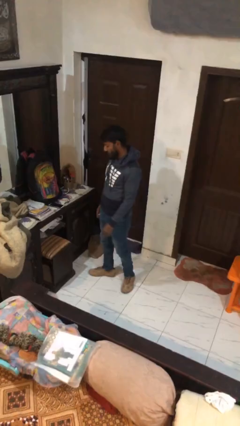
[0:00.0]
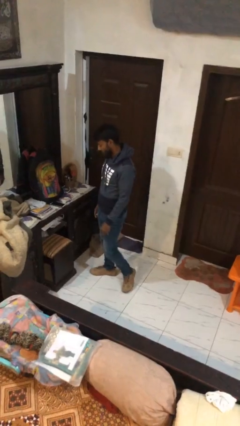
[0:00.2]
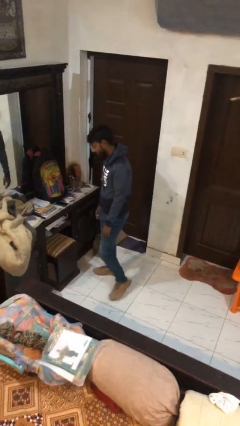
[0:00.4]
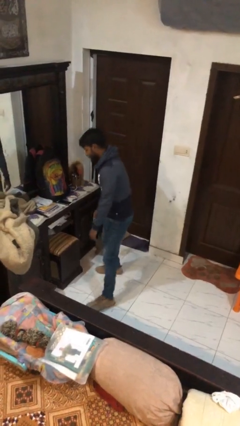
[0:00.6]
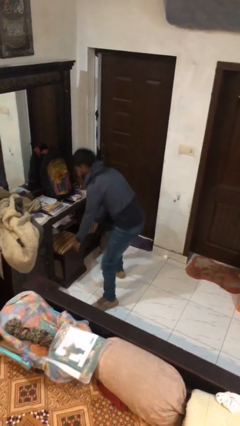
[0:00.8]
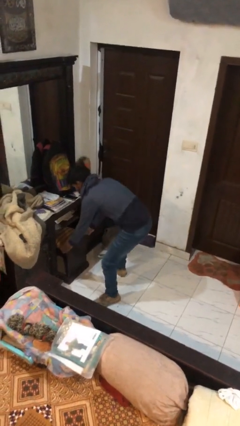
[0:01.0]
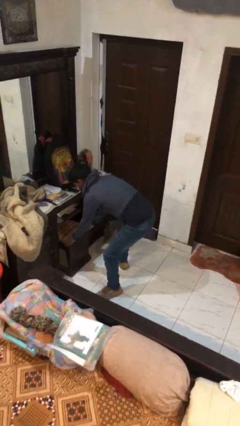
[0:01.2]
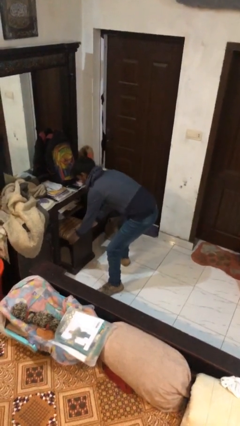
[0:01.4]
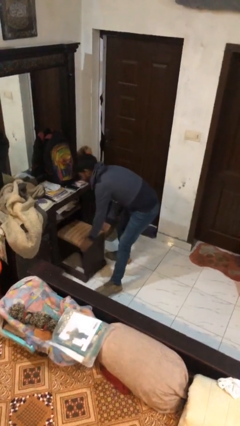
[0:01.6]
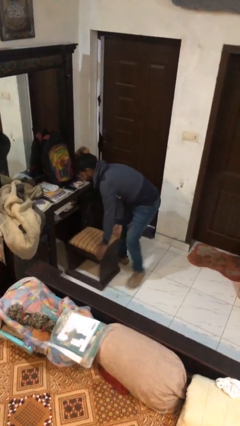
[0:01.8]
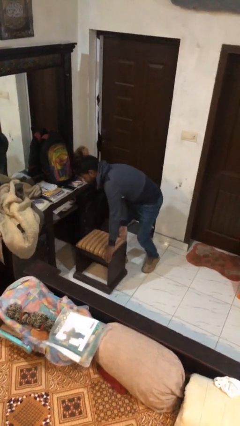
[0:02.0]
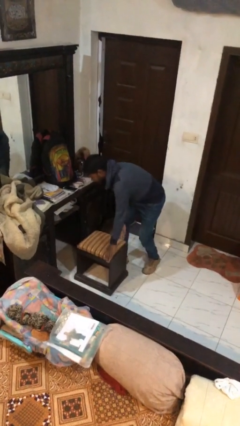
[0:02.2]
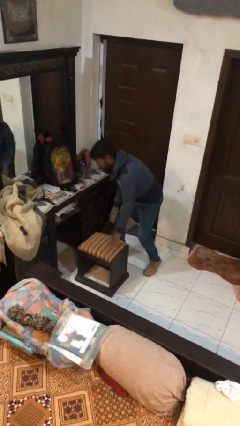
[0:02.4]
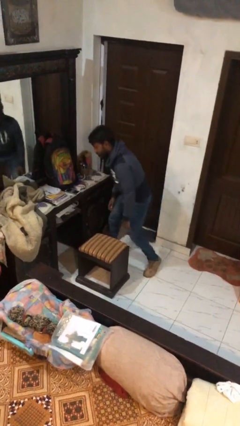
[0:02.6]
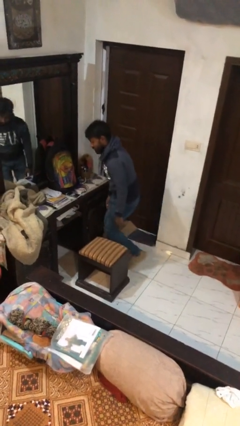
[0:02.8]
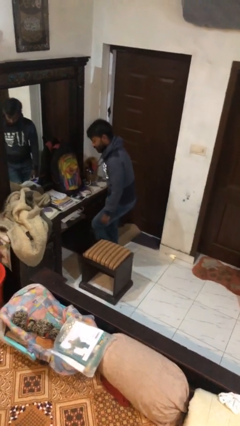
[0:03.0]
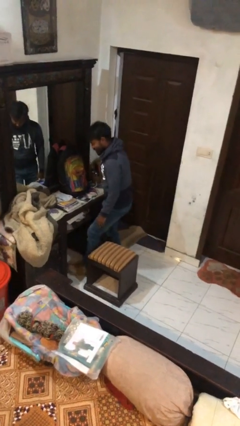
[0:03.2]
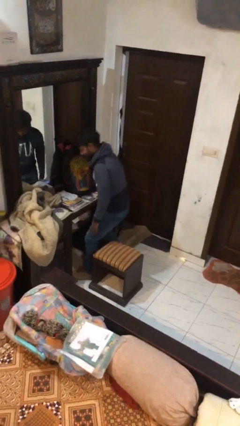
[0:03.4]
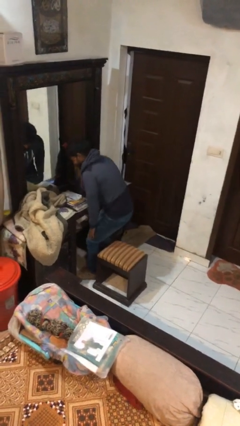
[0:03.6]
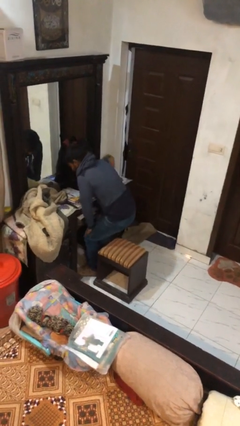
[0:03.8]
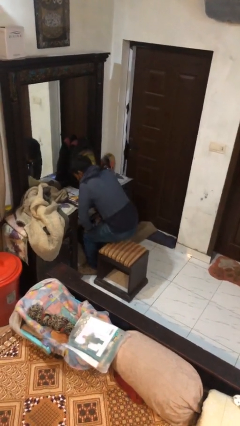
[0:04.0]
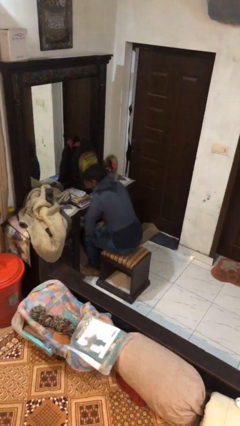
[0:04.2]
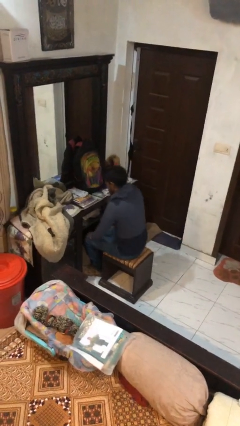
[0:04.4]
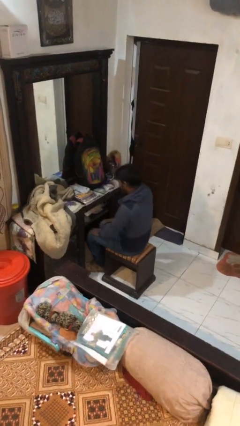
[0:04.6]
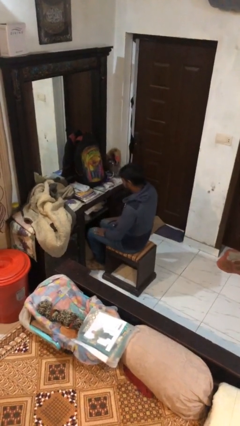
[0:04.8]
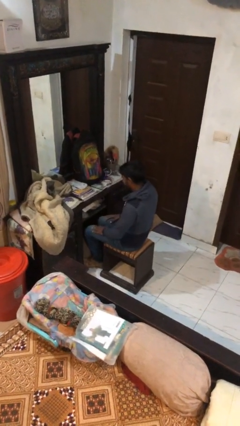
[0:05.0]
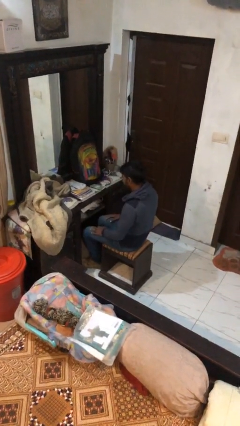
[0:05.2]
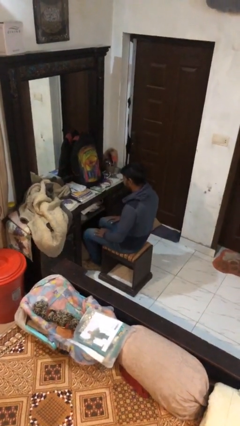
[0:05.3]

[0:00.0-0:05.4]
person sits down

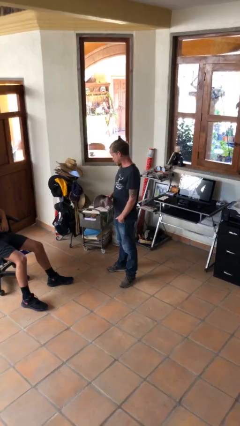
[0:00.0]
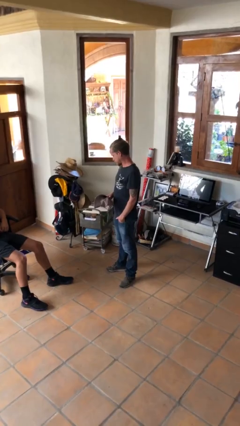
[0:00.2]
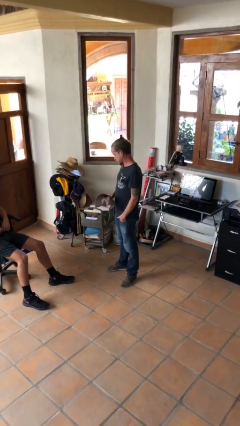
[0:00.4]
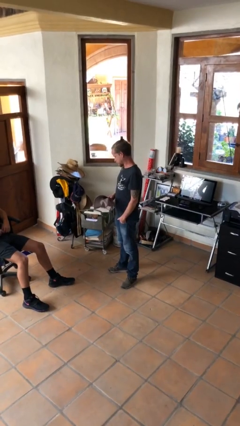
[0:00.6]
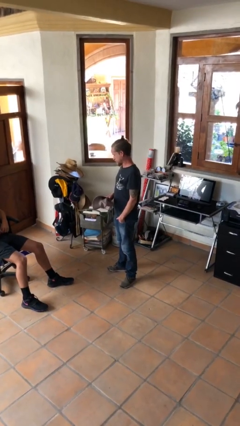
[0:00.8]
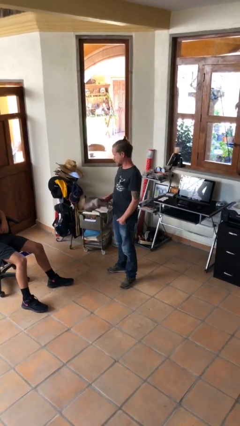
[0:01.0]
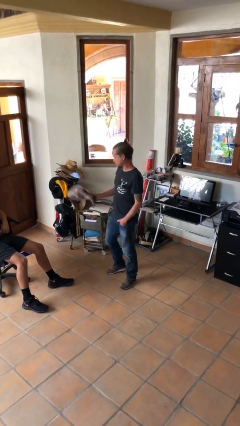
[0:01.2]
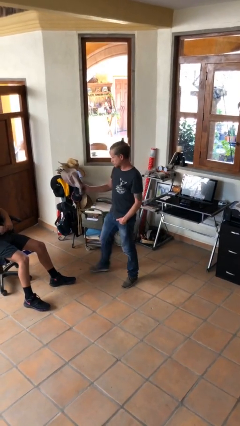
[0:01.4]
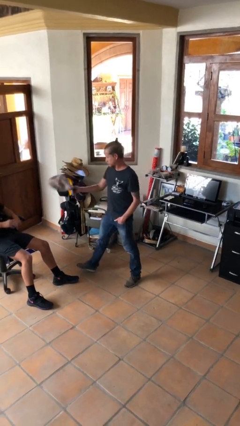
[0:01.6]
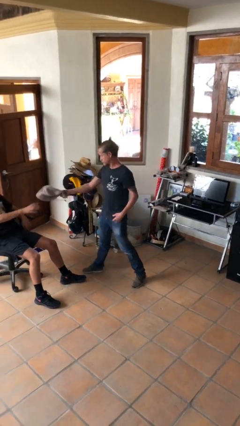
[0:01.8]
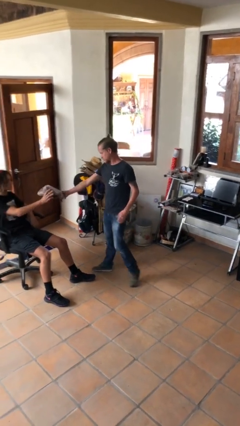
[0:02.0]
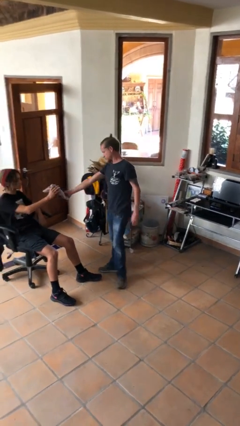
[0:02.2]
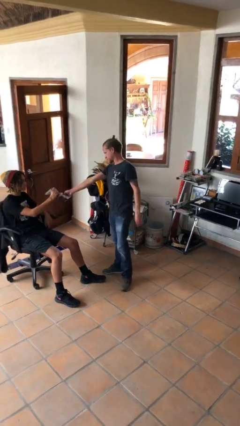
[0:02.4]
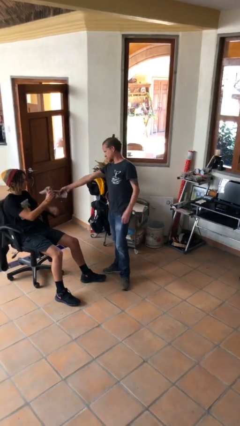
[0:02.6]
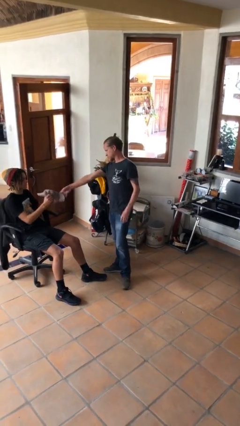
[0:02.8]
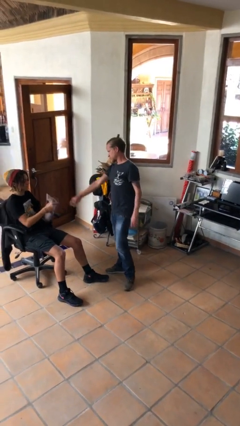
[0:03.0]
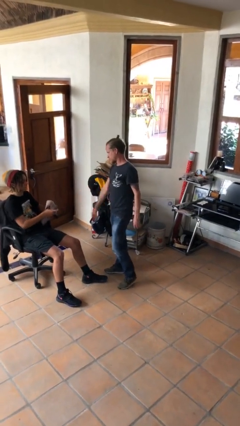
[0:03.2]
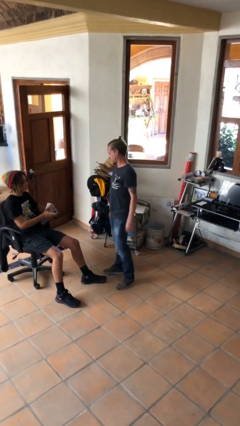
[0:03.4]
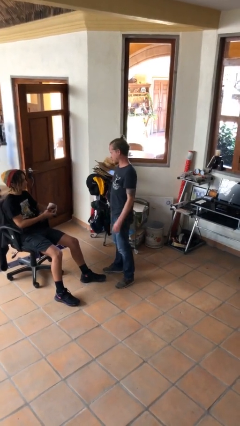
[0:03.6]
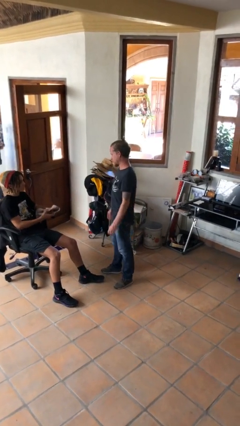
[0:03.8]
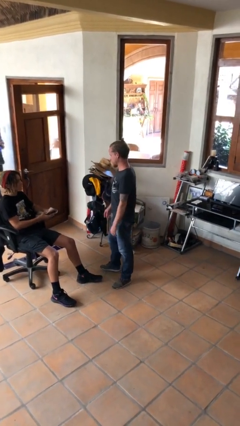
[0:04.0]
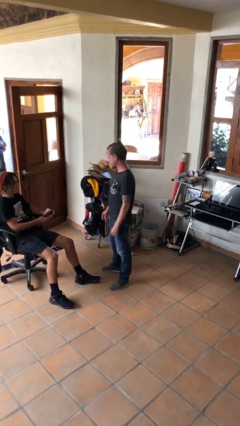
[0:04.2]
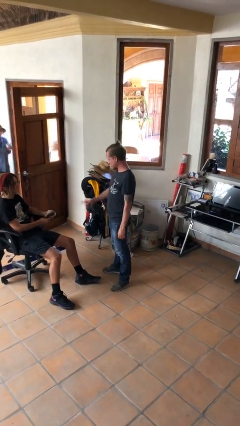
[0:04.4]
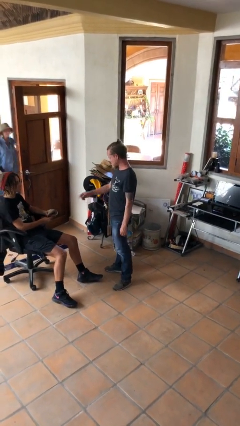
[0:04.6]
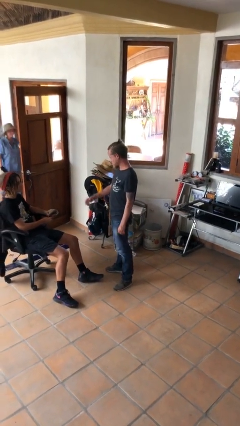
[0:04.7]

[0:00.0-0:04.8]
person transfers object to person

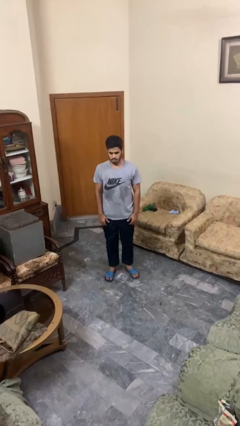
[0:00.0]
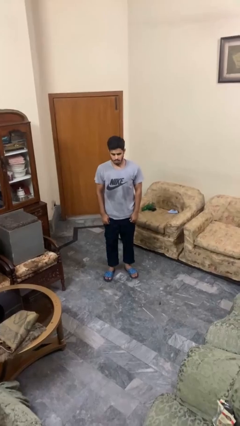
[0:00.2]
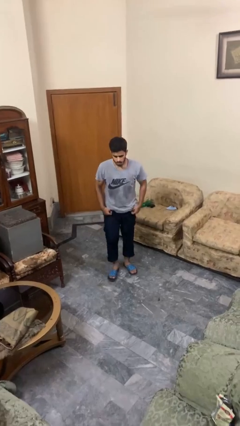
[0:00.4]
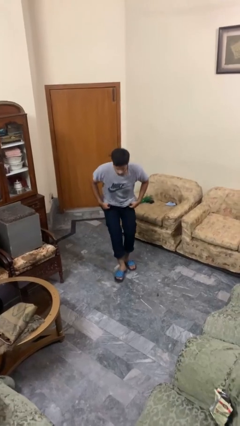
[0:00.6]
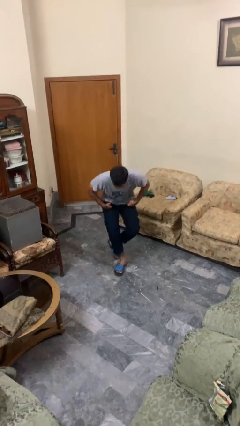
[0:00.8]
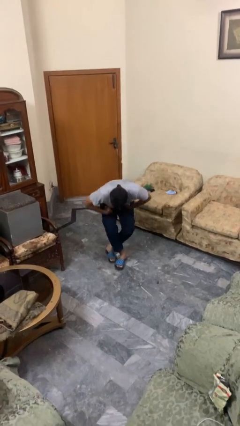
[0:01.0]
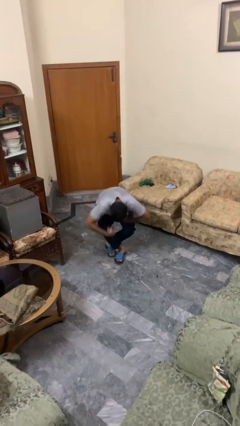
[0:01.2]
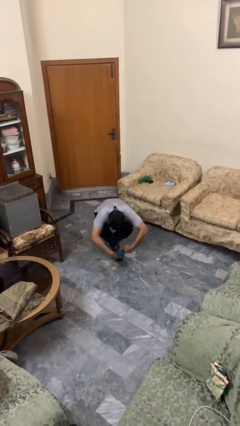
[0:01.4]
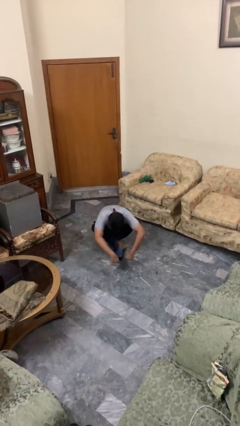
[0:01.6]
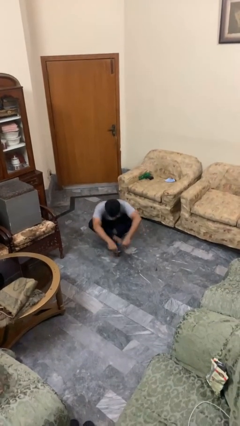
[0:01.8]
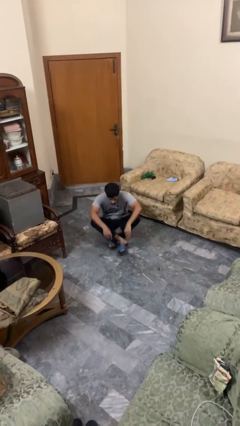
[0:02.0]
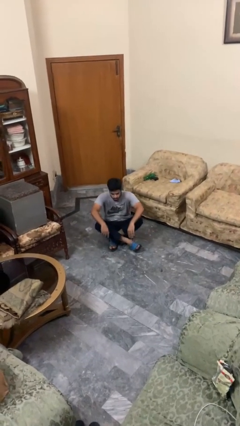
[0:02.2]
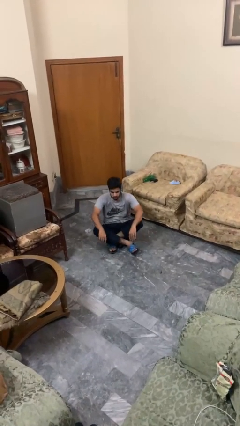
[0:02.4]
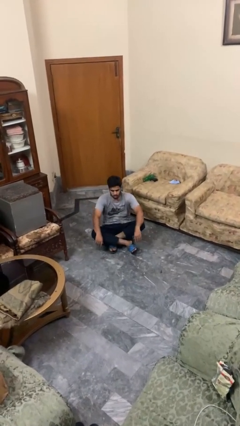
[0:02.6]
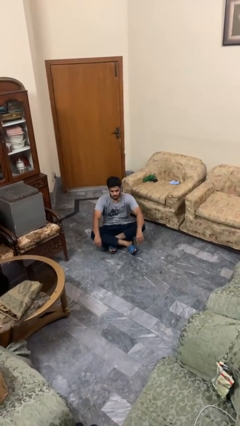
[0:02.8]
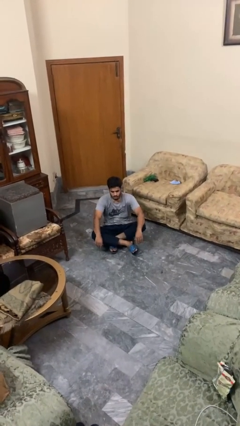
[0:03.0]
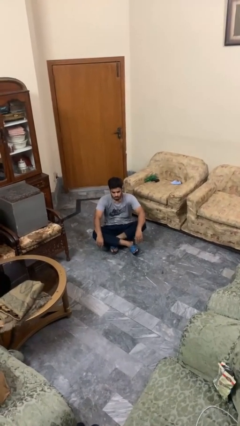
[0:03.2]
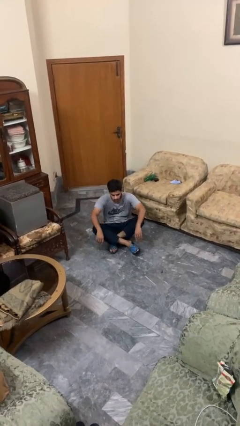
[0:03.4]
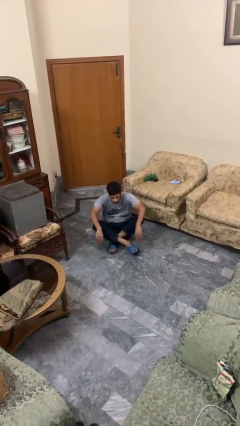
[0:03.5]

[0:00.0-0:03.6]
person sits crisscross

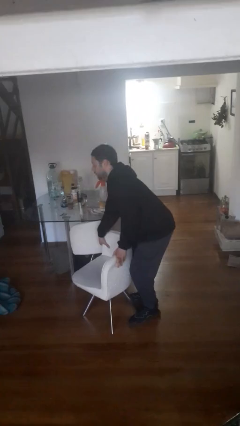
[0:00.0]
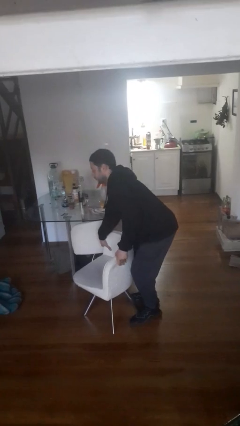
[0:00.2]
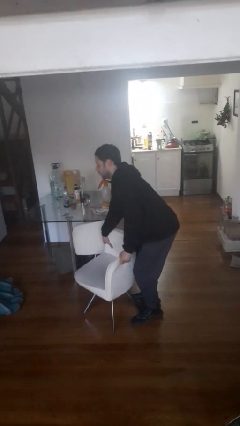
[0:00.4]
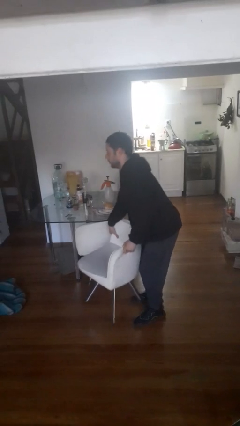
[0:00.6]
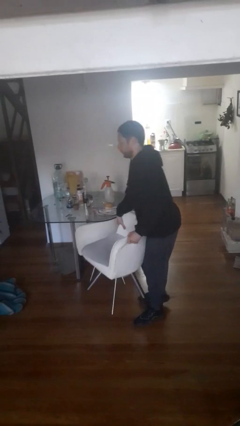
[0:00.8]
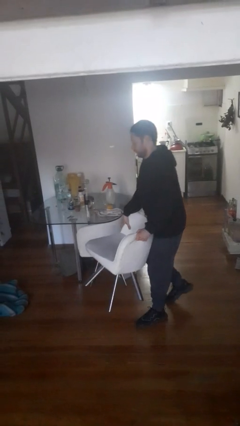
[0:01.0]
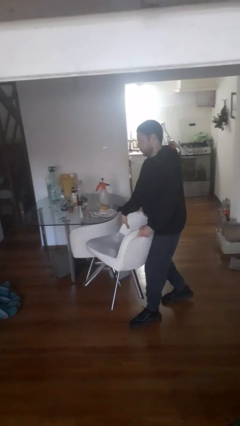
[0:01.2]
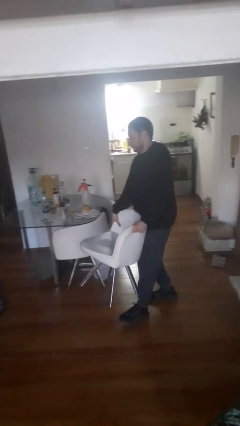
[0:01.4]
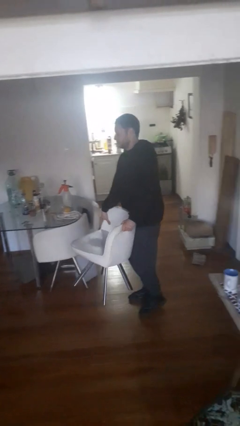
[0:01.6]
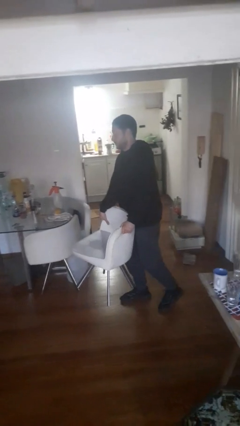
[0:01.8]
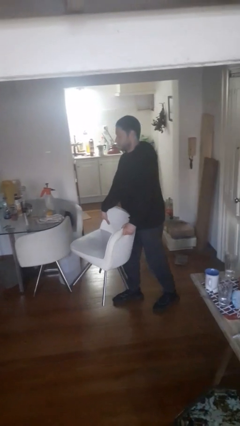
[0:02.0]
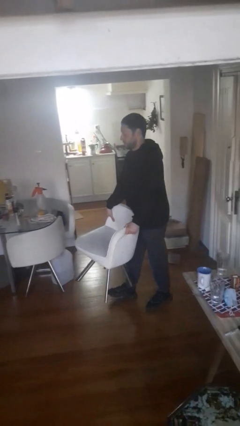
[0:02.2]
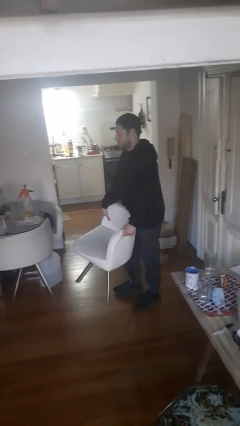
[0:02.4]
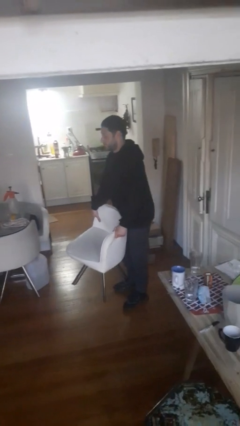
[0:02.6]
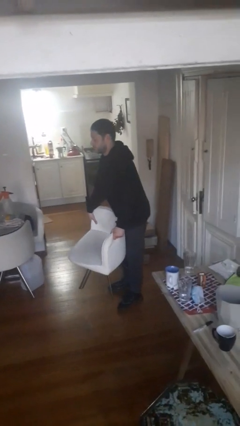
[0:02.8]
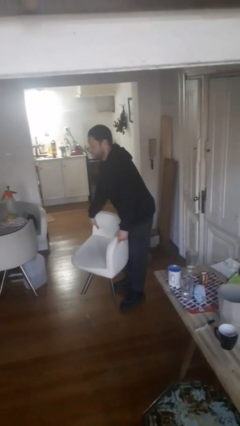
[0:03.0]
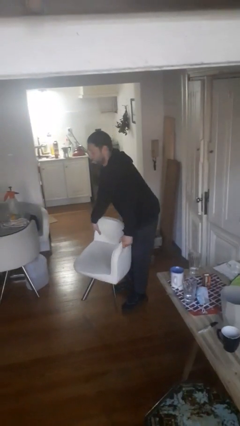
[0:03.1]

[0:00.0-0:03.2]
person carries furniture

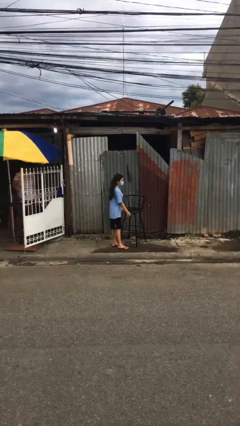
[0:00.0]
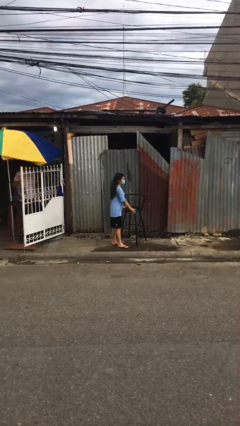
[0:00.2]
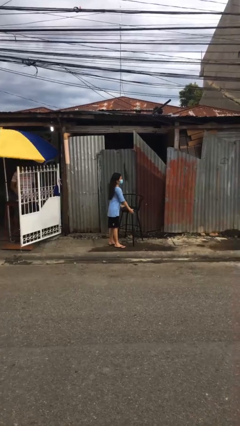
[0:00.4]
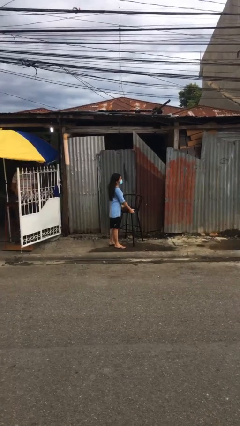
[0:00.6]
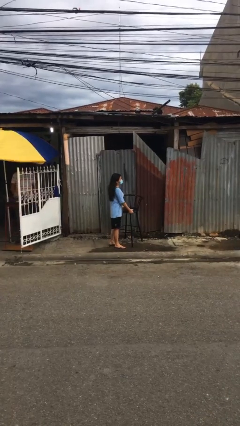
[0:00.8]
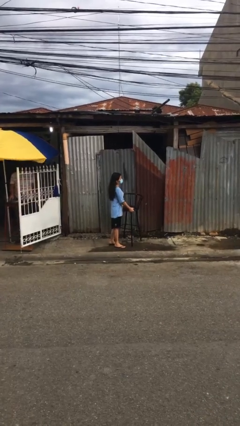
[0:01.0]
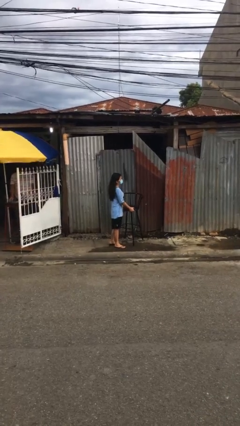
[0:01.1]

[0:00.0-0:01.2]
person picks up object from floor
